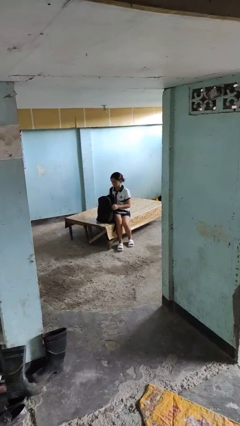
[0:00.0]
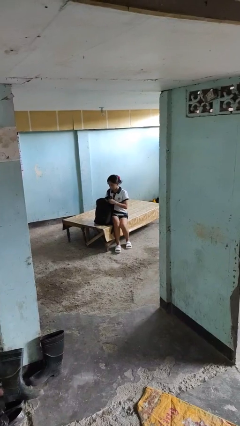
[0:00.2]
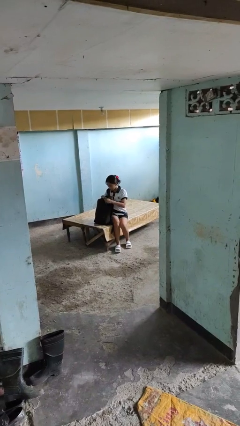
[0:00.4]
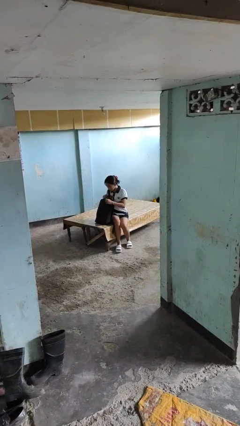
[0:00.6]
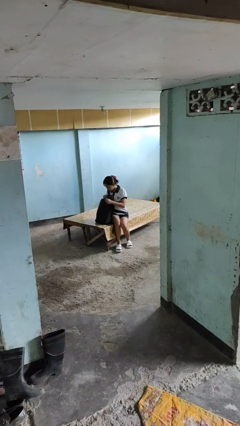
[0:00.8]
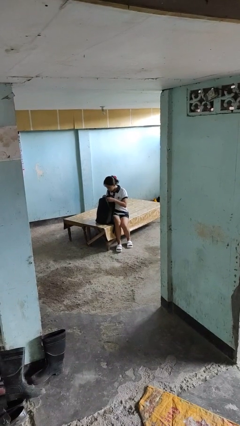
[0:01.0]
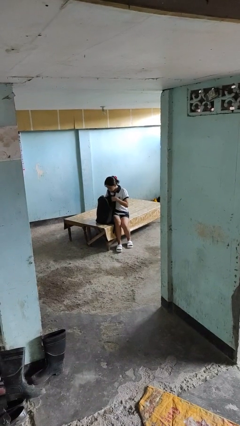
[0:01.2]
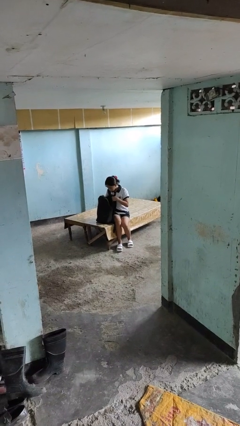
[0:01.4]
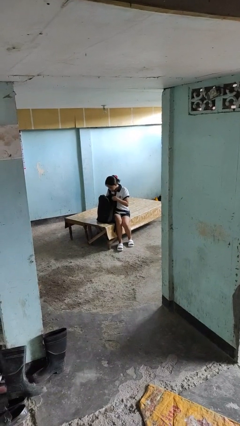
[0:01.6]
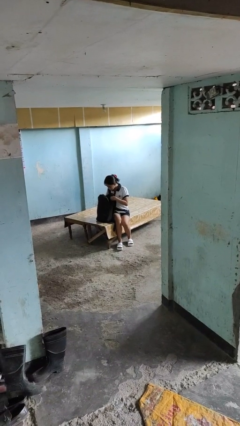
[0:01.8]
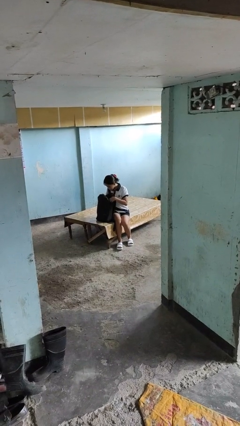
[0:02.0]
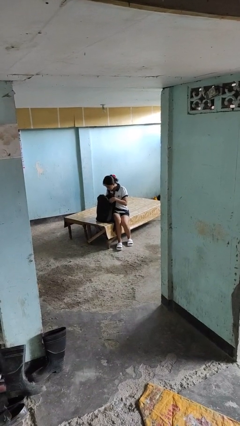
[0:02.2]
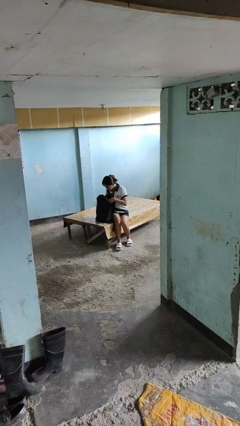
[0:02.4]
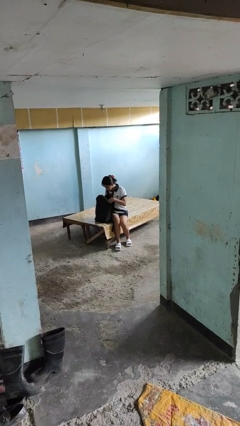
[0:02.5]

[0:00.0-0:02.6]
person searches in backpack

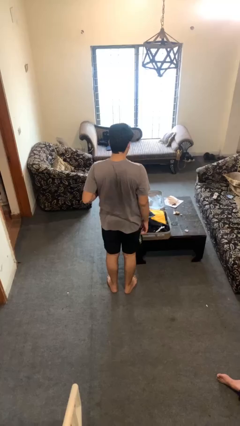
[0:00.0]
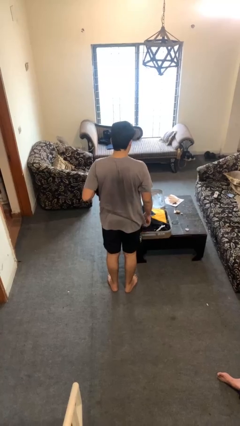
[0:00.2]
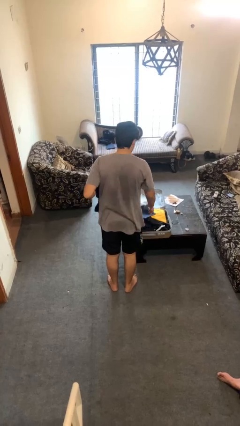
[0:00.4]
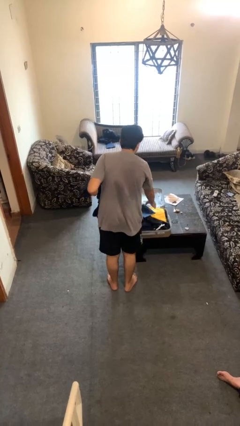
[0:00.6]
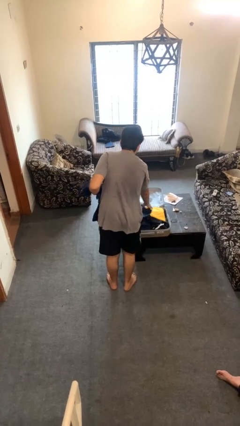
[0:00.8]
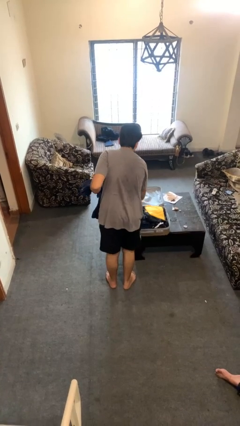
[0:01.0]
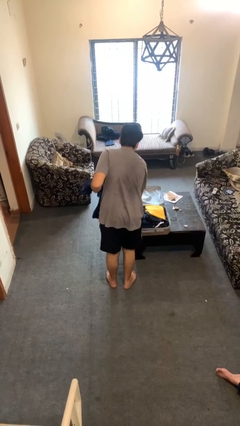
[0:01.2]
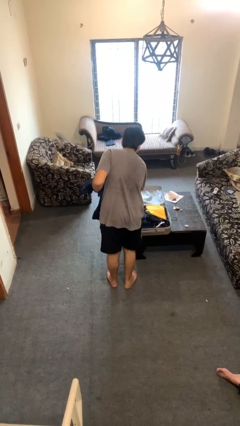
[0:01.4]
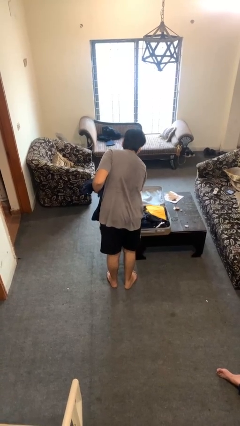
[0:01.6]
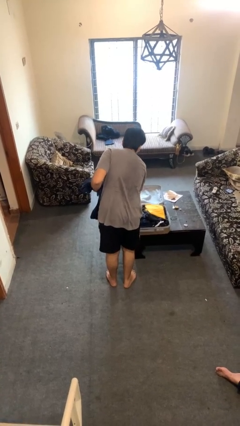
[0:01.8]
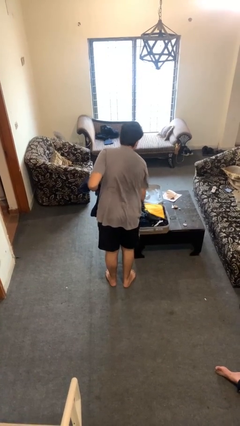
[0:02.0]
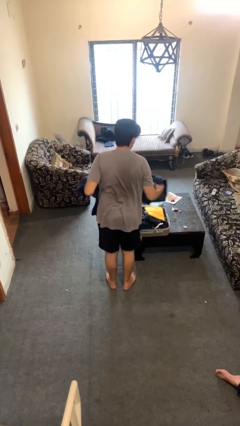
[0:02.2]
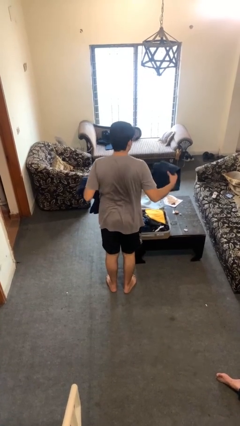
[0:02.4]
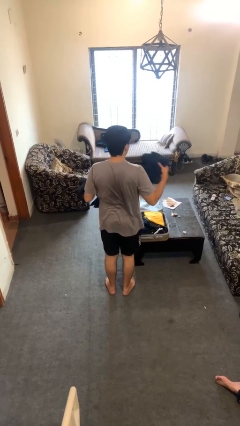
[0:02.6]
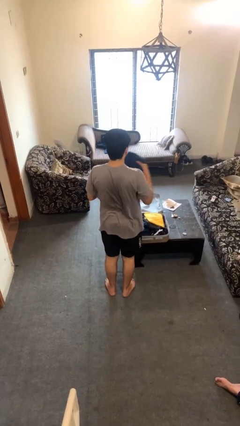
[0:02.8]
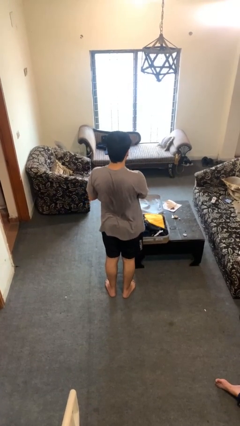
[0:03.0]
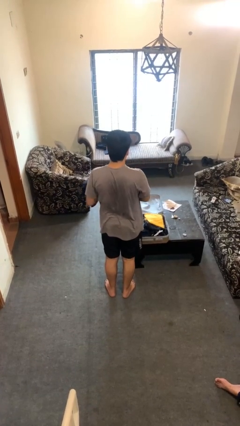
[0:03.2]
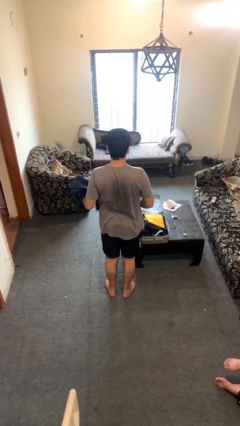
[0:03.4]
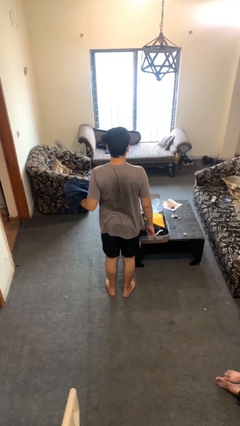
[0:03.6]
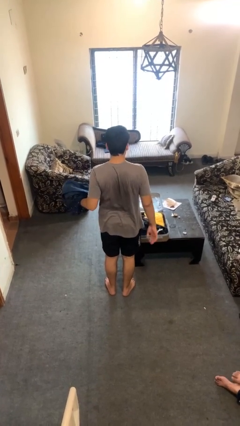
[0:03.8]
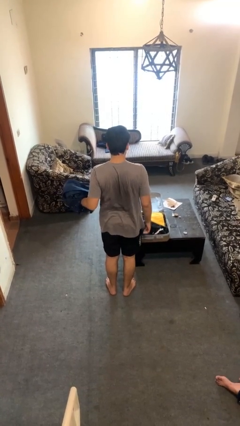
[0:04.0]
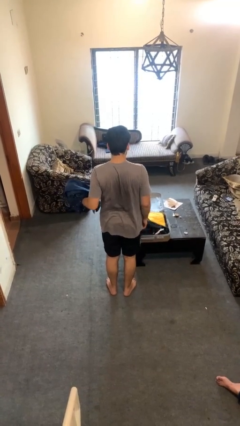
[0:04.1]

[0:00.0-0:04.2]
person unloads clothes from suitcase

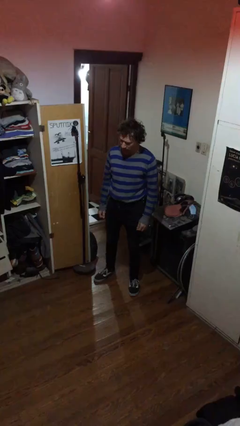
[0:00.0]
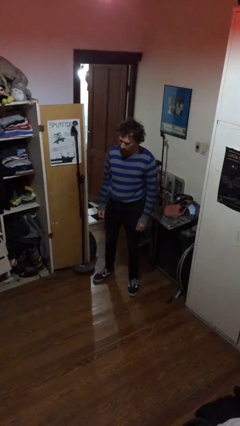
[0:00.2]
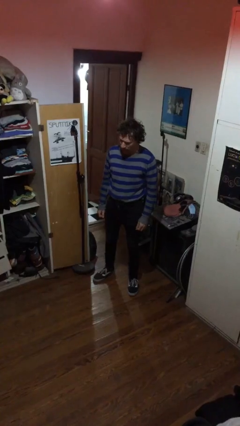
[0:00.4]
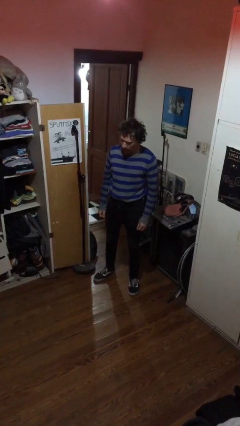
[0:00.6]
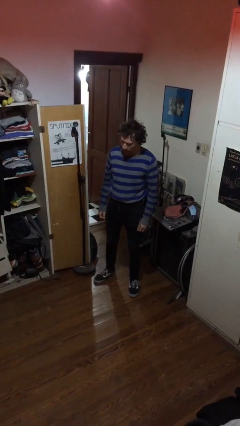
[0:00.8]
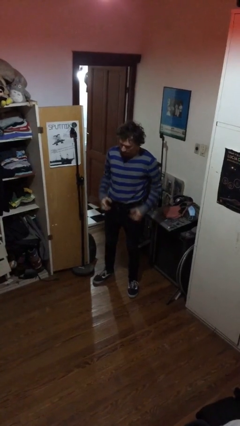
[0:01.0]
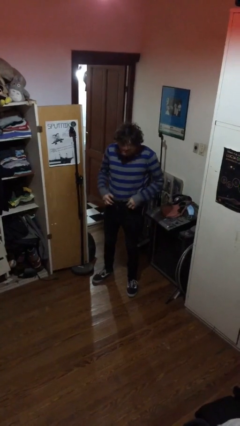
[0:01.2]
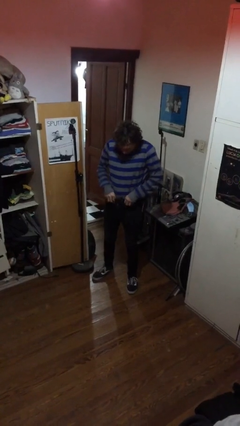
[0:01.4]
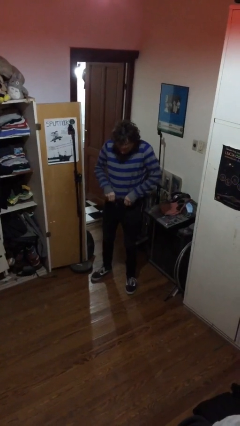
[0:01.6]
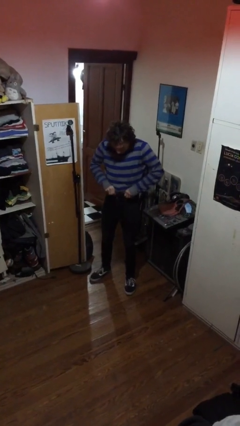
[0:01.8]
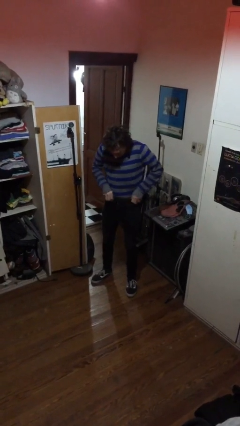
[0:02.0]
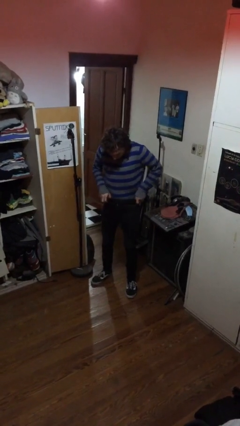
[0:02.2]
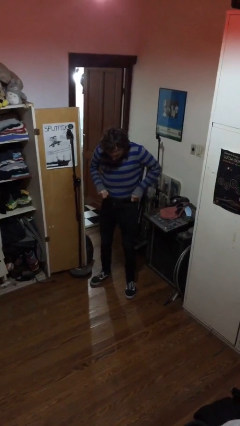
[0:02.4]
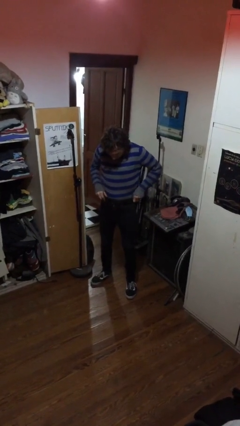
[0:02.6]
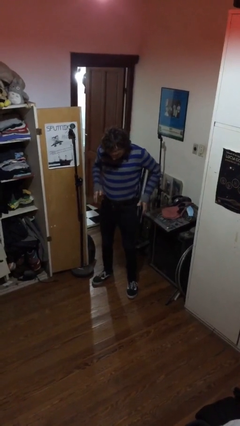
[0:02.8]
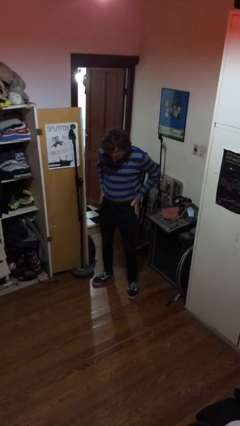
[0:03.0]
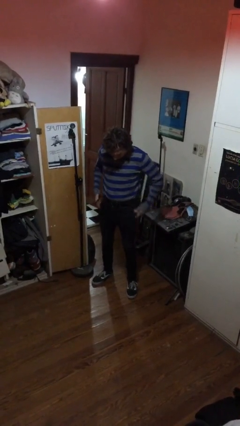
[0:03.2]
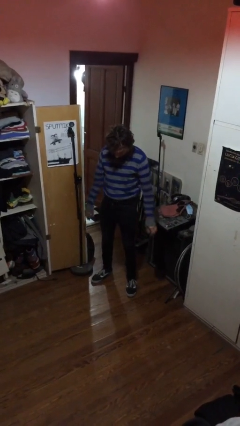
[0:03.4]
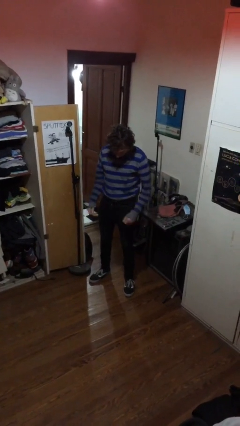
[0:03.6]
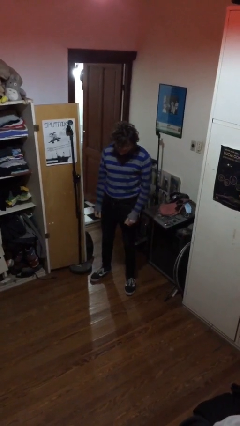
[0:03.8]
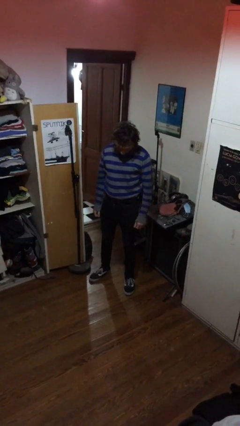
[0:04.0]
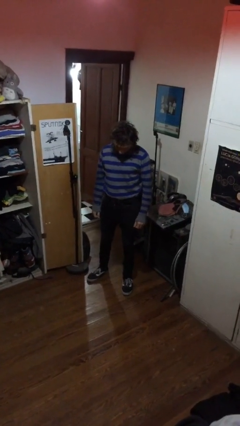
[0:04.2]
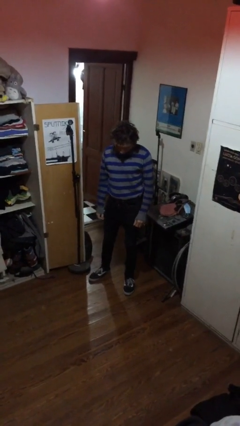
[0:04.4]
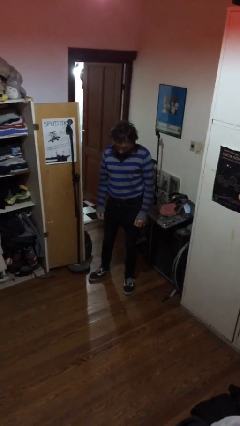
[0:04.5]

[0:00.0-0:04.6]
person hikes up pants

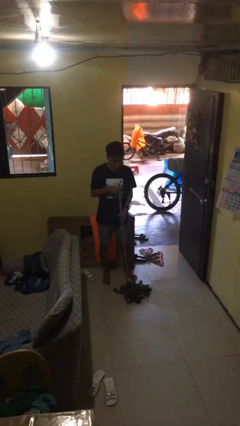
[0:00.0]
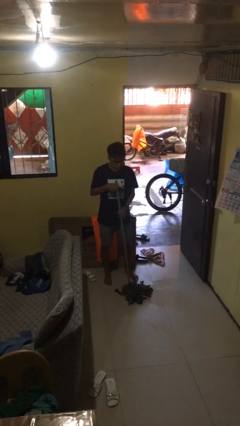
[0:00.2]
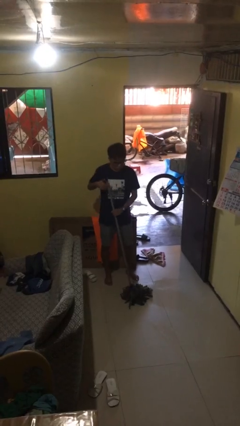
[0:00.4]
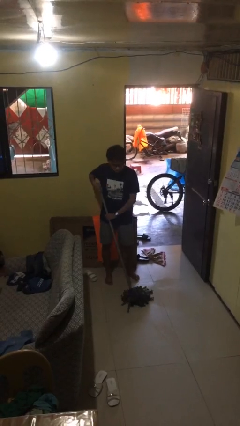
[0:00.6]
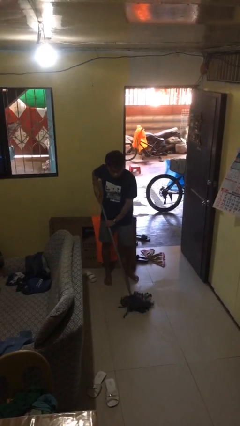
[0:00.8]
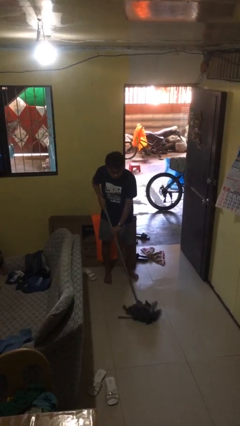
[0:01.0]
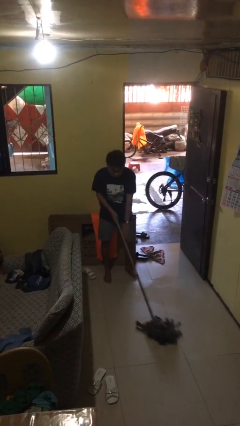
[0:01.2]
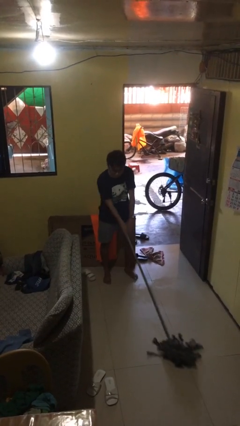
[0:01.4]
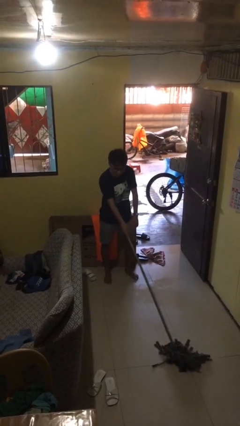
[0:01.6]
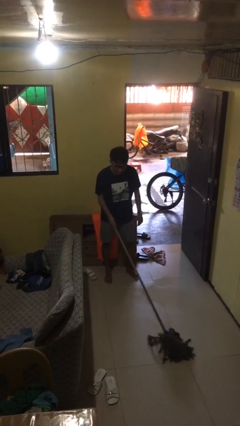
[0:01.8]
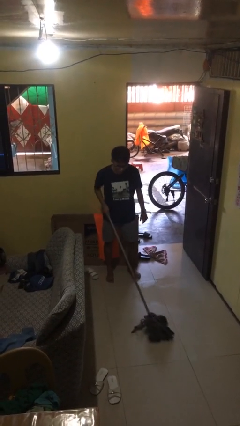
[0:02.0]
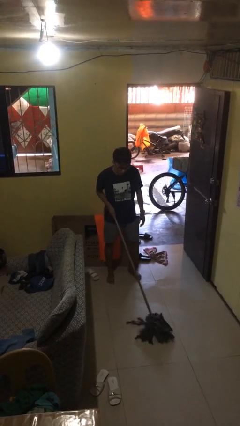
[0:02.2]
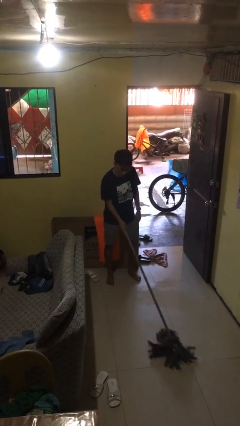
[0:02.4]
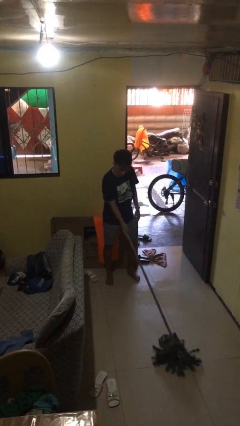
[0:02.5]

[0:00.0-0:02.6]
person mops

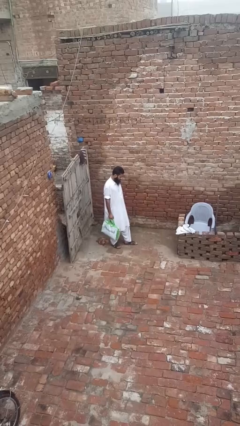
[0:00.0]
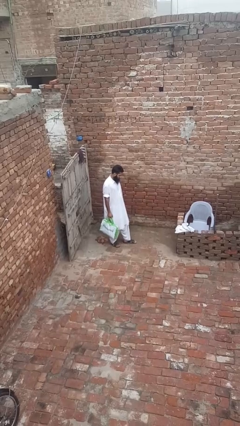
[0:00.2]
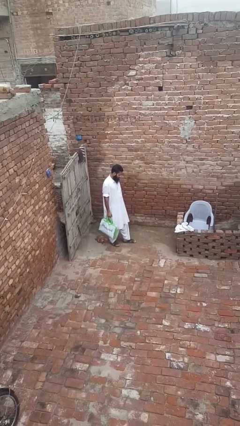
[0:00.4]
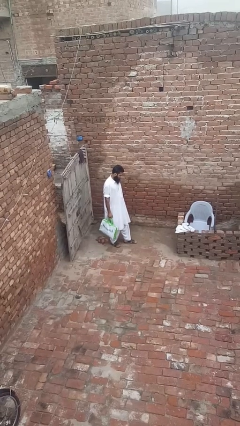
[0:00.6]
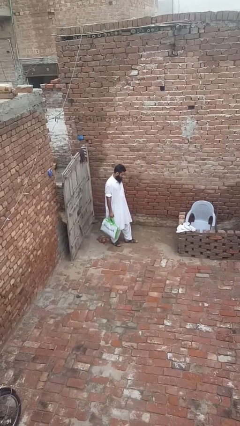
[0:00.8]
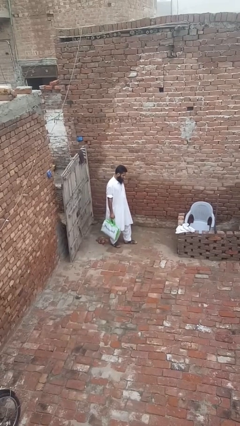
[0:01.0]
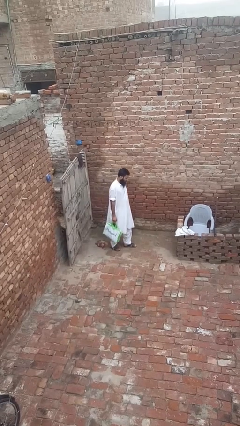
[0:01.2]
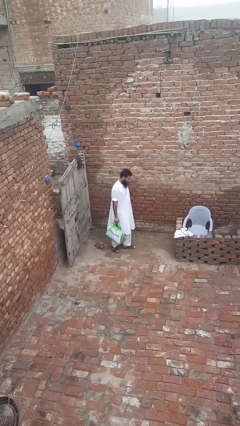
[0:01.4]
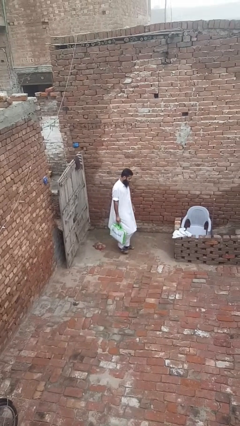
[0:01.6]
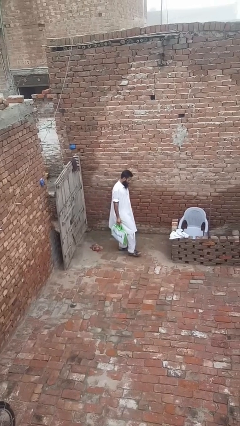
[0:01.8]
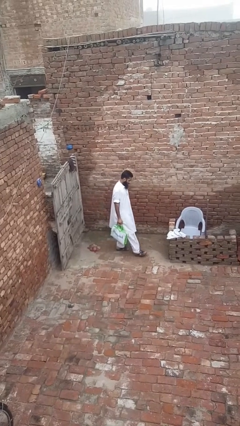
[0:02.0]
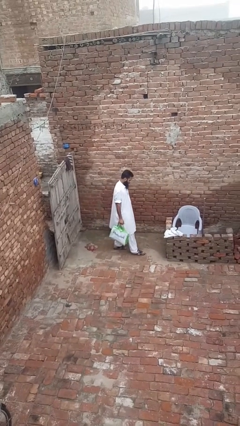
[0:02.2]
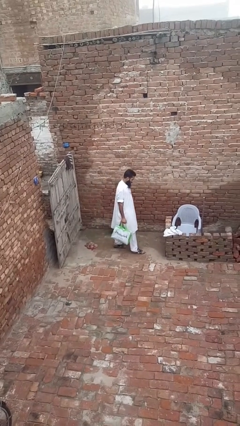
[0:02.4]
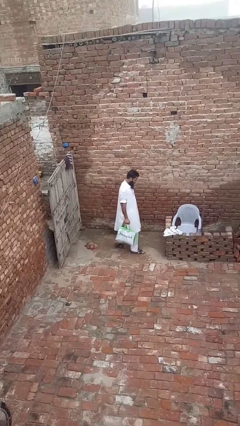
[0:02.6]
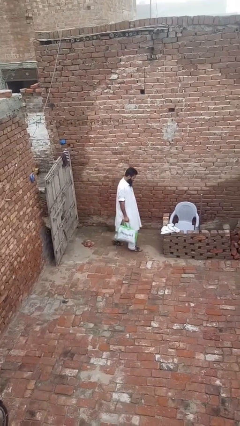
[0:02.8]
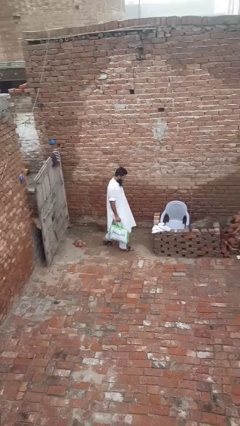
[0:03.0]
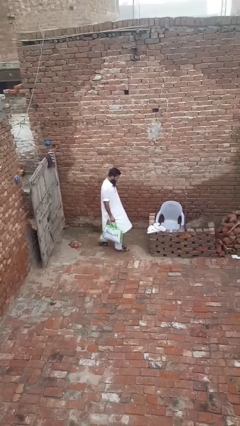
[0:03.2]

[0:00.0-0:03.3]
person carries groceries

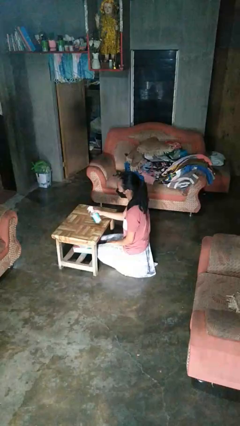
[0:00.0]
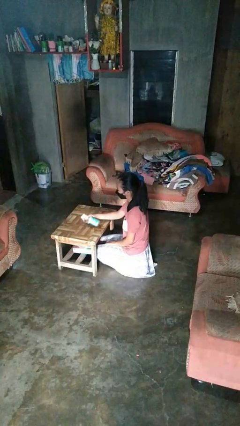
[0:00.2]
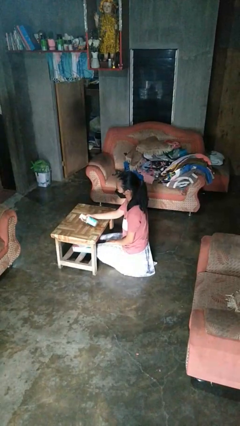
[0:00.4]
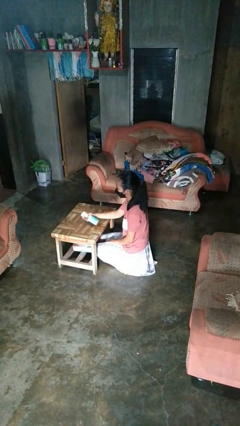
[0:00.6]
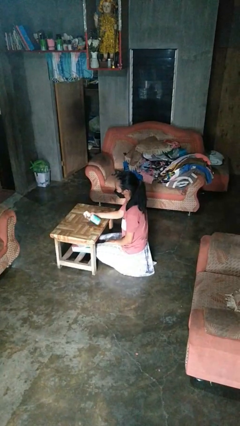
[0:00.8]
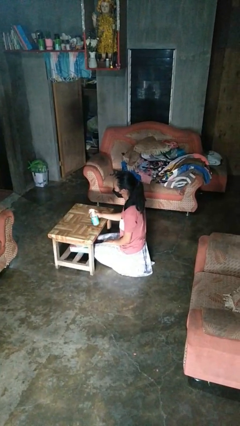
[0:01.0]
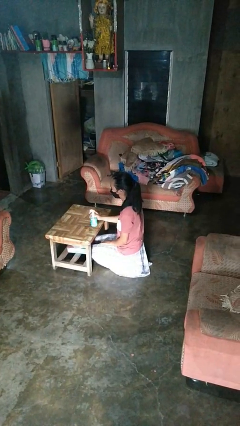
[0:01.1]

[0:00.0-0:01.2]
person sprays from bottle
